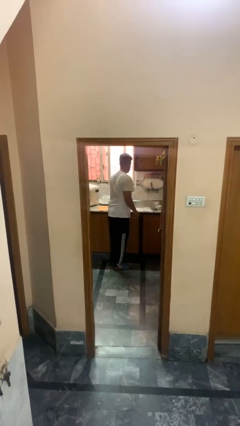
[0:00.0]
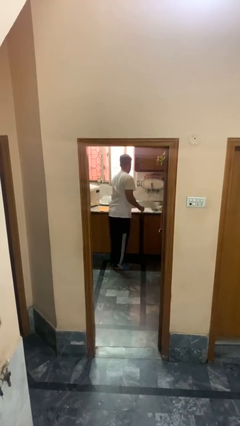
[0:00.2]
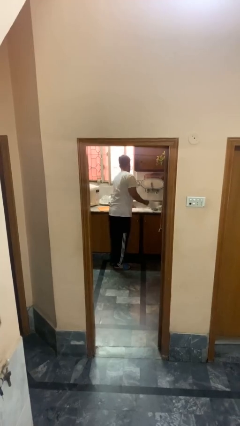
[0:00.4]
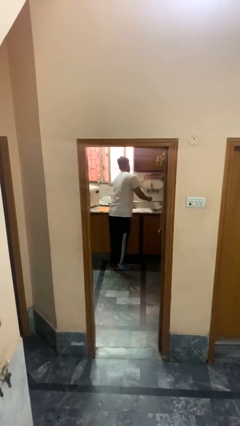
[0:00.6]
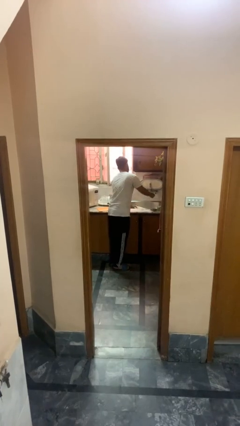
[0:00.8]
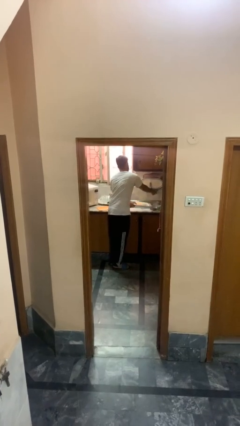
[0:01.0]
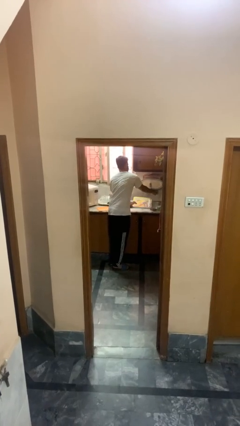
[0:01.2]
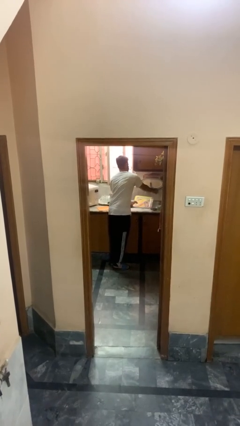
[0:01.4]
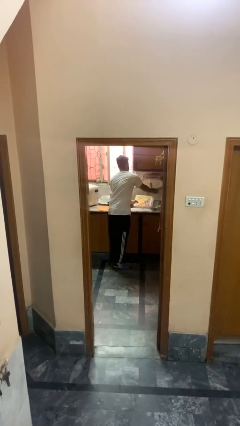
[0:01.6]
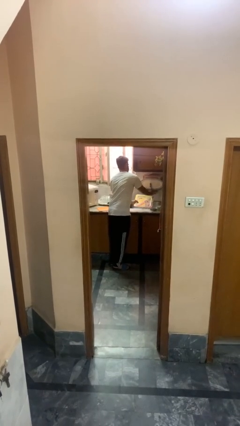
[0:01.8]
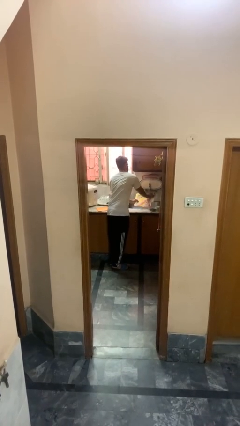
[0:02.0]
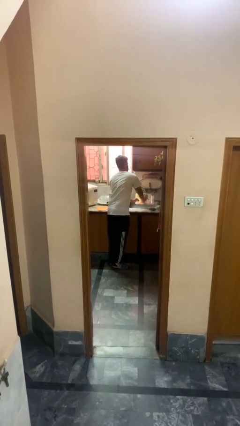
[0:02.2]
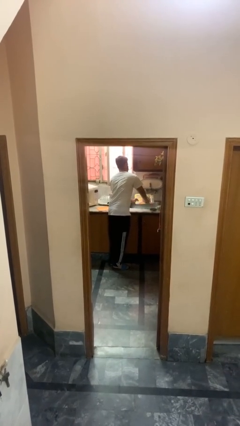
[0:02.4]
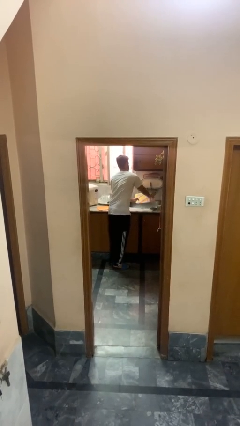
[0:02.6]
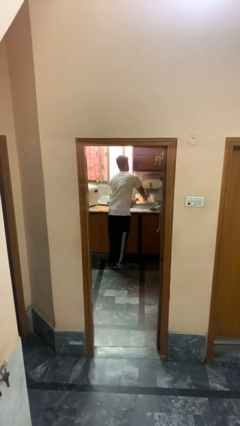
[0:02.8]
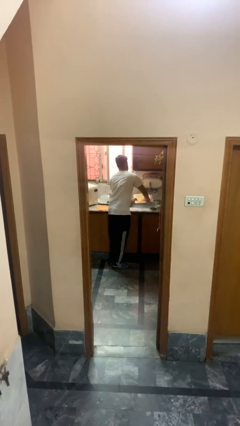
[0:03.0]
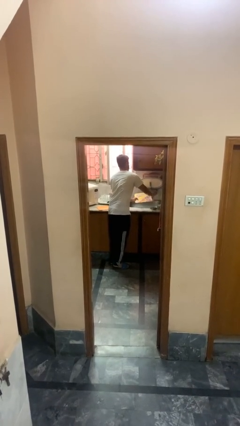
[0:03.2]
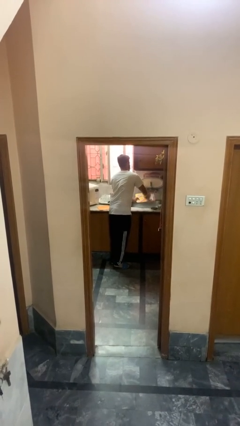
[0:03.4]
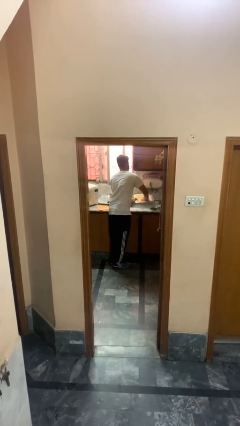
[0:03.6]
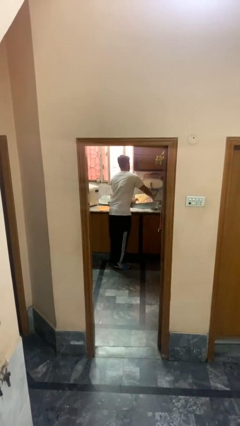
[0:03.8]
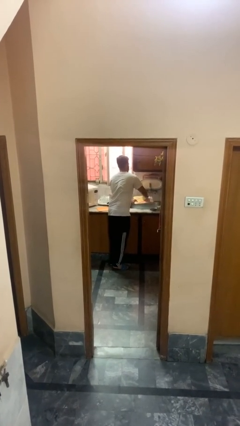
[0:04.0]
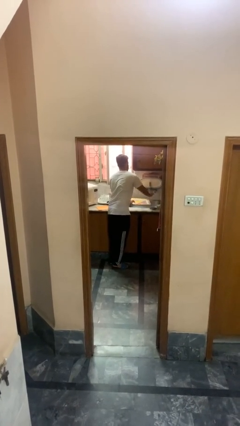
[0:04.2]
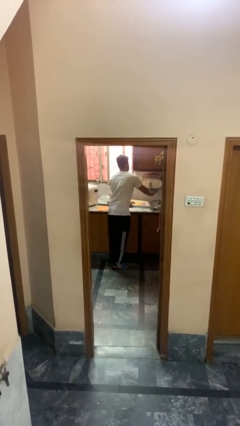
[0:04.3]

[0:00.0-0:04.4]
person washes dish

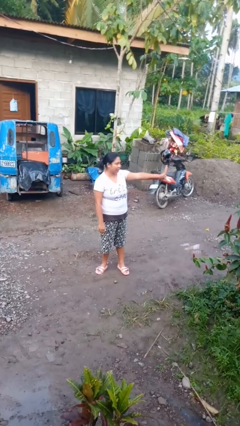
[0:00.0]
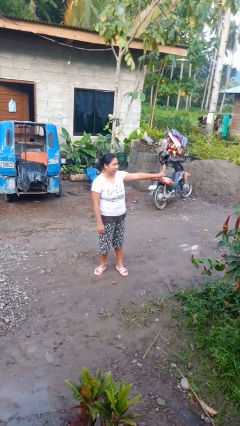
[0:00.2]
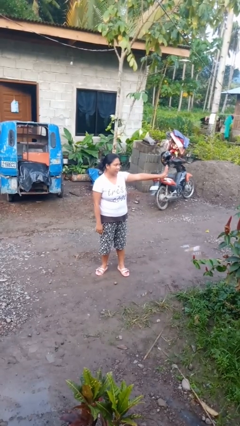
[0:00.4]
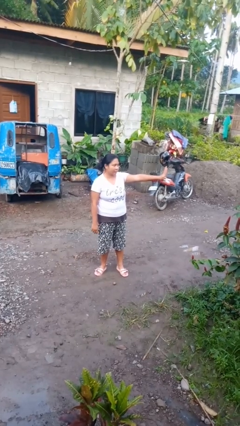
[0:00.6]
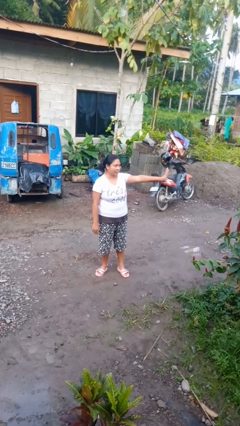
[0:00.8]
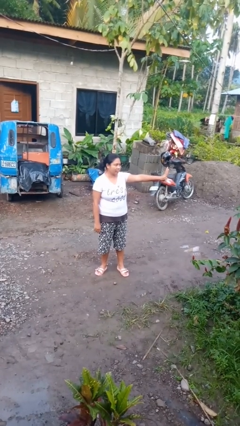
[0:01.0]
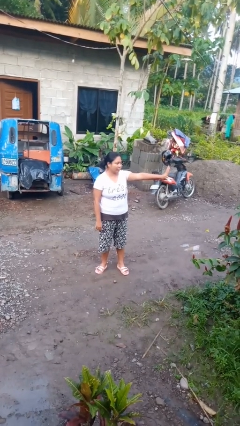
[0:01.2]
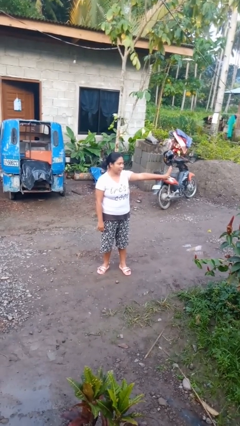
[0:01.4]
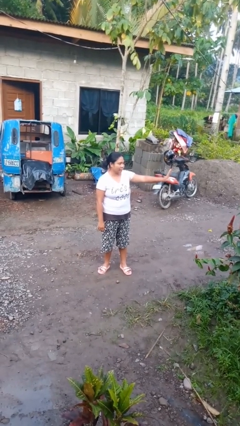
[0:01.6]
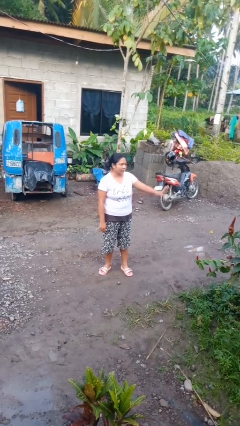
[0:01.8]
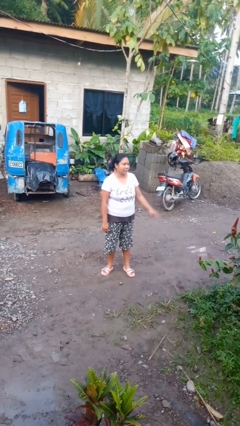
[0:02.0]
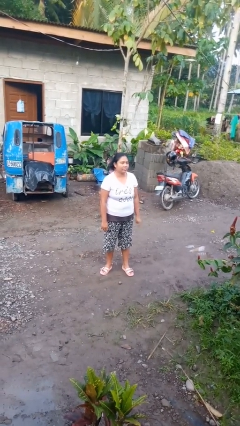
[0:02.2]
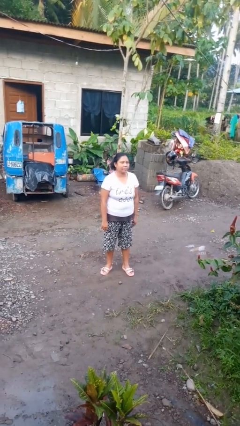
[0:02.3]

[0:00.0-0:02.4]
person gestures number four

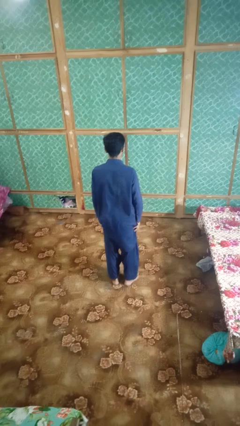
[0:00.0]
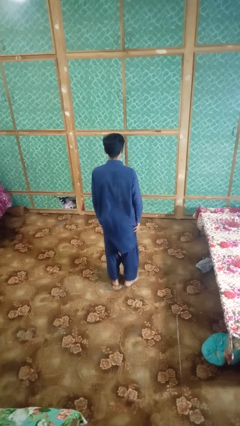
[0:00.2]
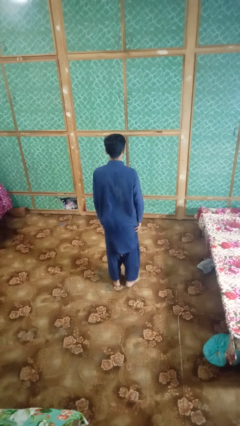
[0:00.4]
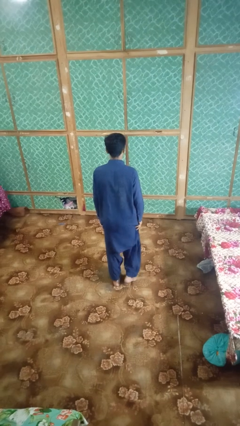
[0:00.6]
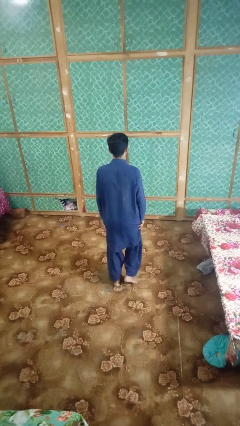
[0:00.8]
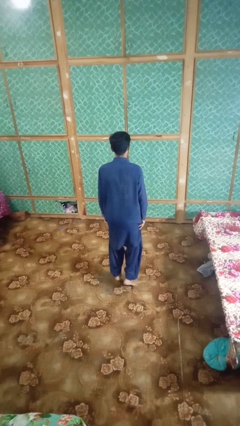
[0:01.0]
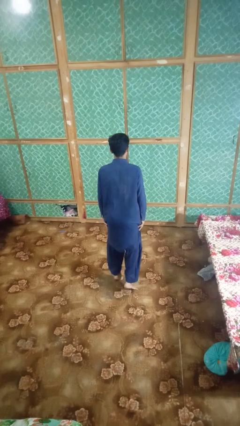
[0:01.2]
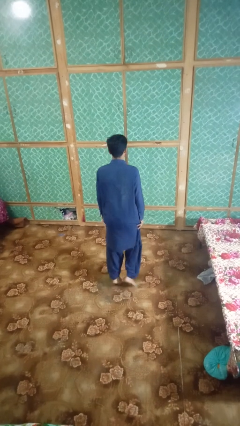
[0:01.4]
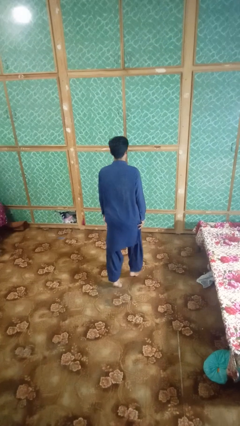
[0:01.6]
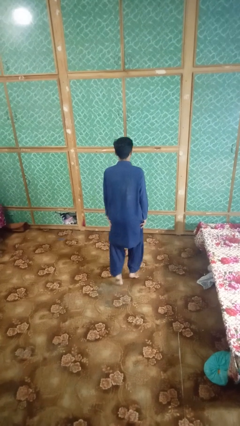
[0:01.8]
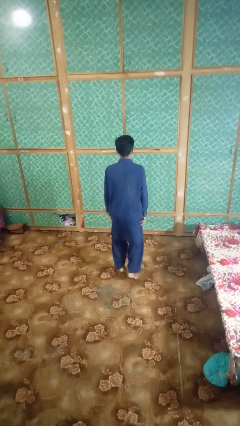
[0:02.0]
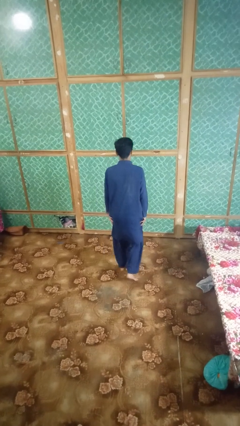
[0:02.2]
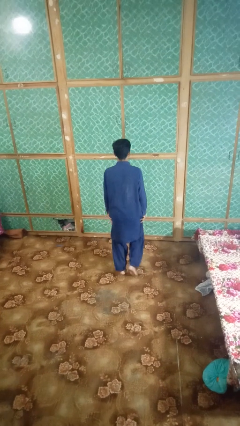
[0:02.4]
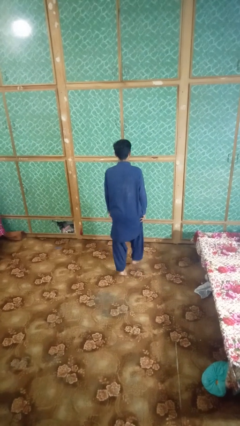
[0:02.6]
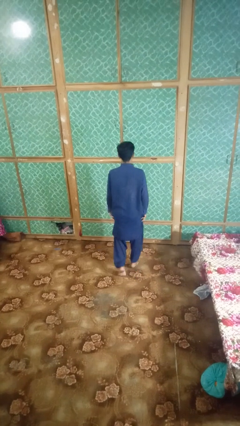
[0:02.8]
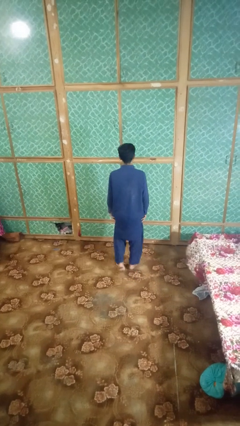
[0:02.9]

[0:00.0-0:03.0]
person walks tiptoe

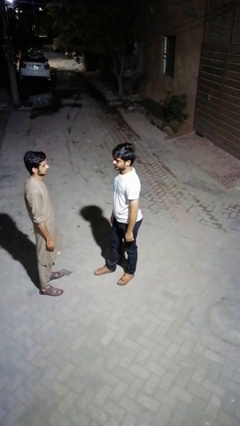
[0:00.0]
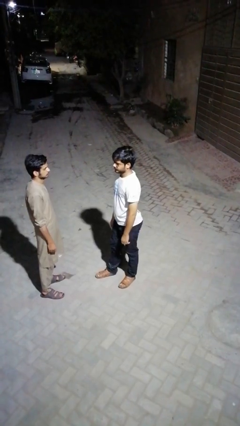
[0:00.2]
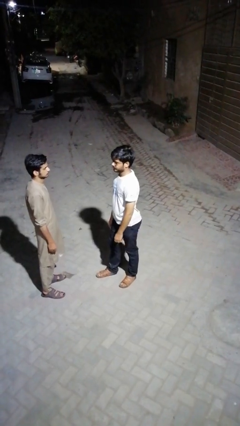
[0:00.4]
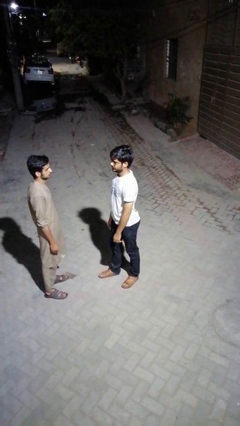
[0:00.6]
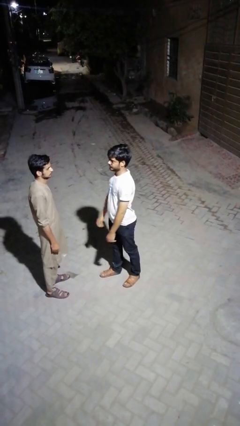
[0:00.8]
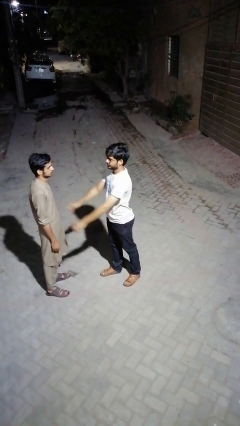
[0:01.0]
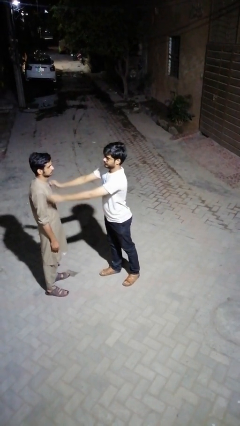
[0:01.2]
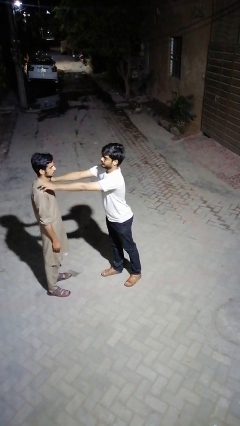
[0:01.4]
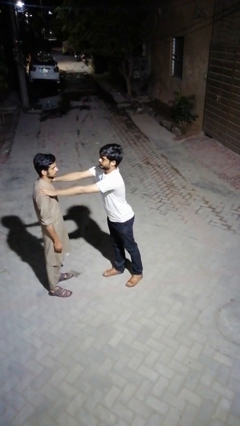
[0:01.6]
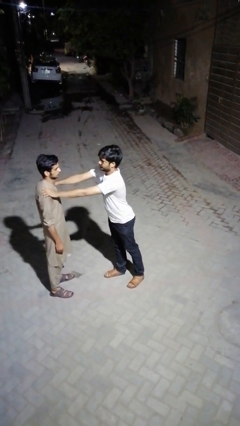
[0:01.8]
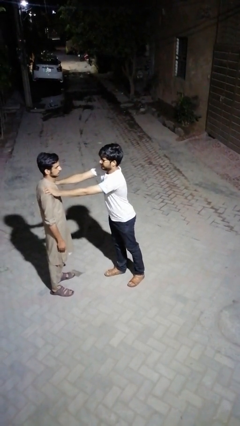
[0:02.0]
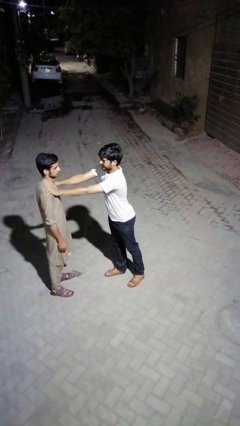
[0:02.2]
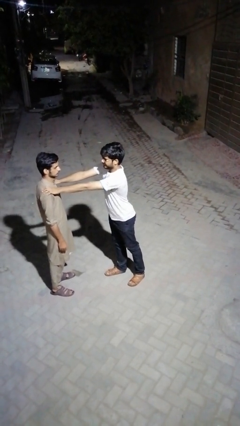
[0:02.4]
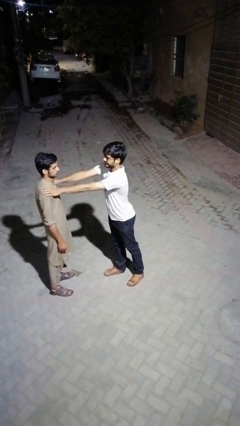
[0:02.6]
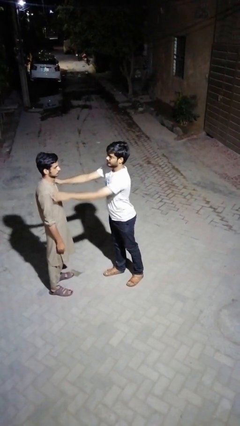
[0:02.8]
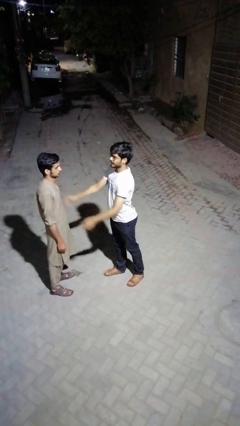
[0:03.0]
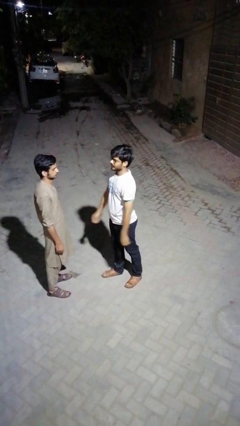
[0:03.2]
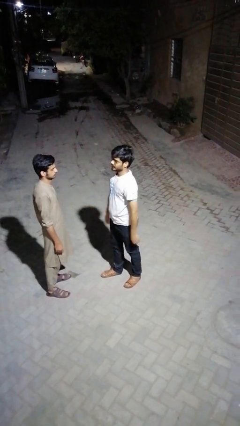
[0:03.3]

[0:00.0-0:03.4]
person pounds shoulders of person

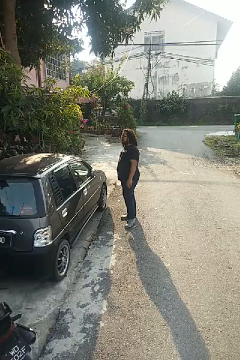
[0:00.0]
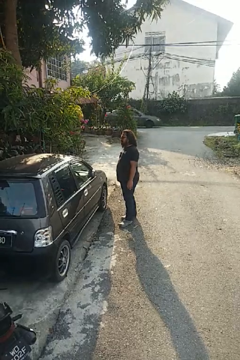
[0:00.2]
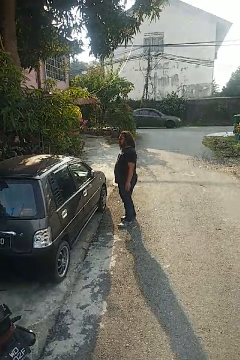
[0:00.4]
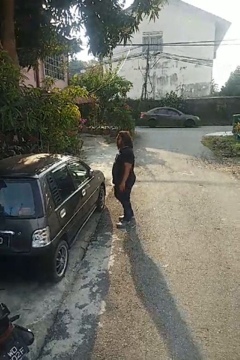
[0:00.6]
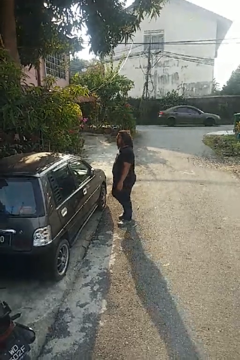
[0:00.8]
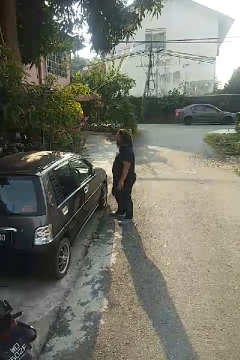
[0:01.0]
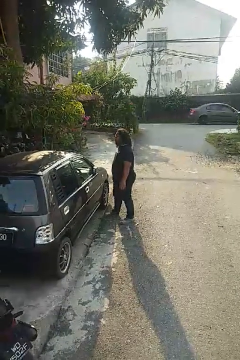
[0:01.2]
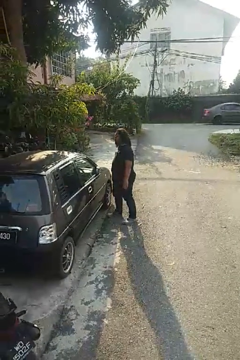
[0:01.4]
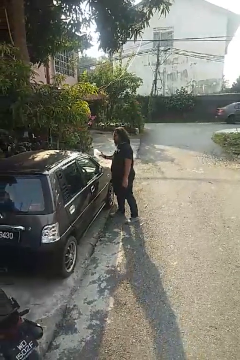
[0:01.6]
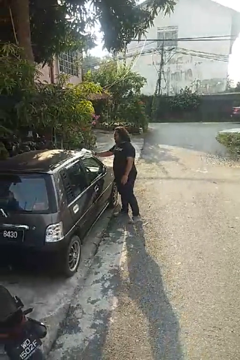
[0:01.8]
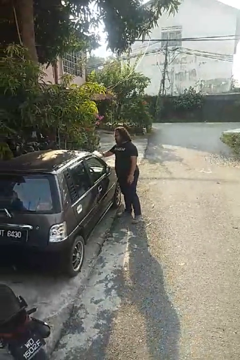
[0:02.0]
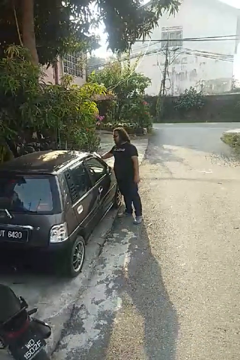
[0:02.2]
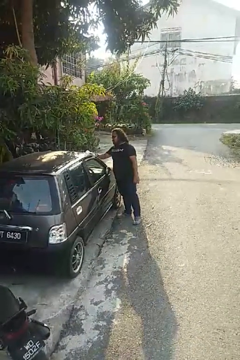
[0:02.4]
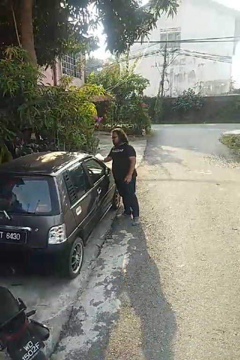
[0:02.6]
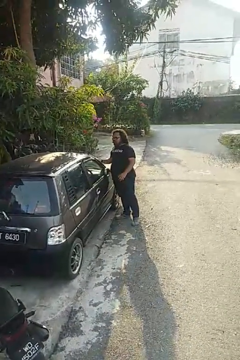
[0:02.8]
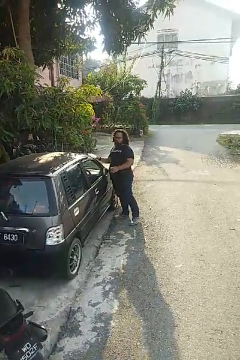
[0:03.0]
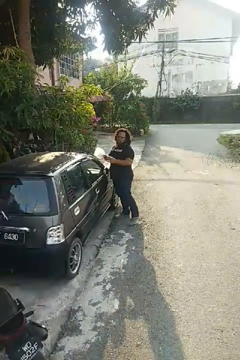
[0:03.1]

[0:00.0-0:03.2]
person polishes car with rag

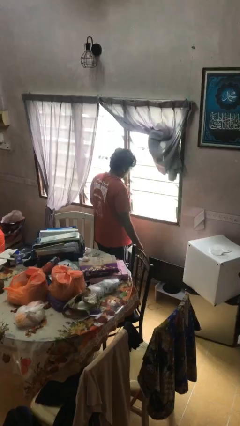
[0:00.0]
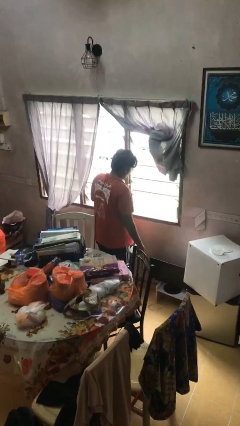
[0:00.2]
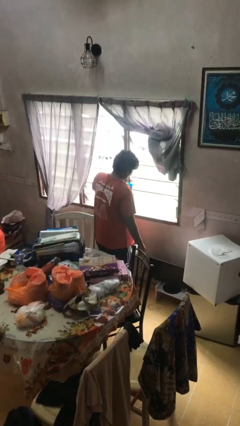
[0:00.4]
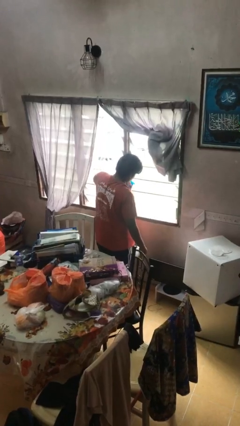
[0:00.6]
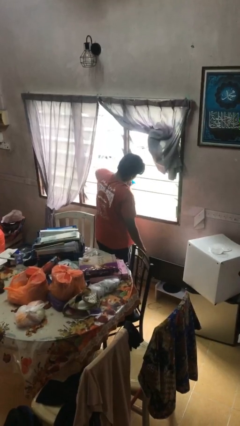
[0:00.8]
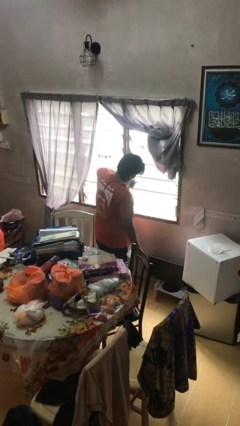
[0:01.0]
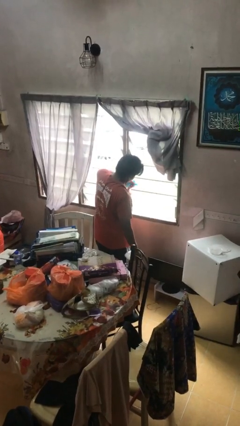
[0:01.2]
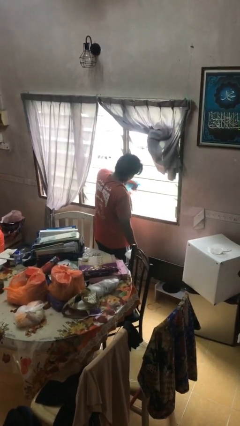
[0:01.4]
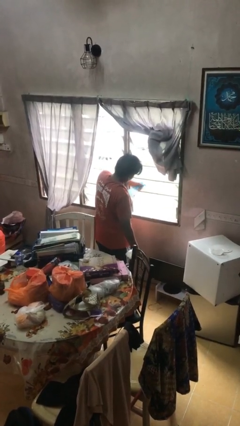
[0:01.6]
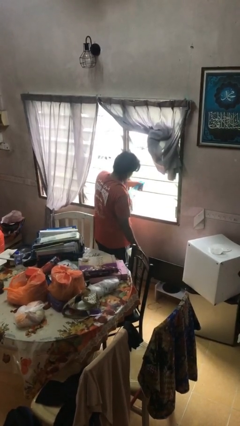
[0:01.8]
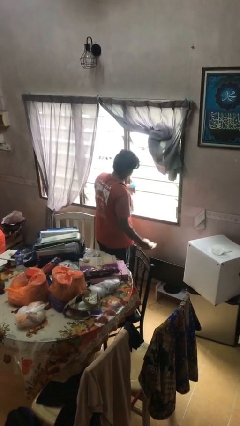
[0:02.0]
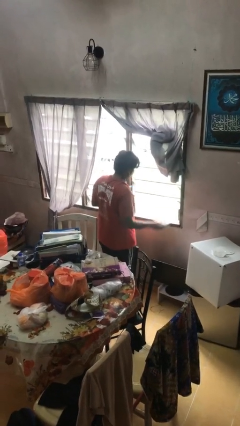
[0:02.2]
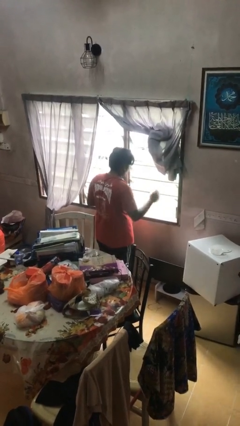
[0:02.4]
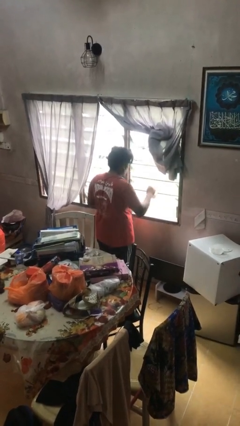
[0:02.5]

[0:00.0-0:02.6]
person sprays from bottle
